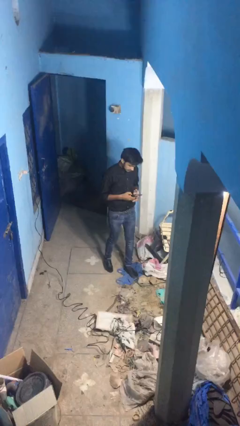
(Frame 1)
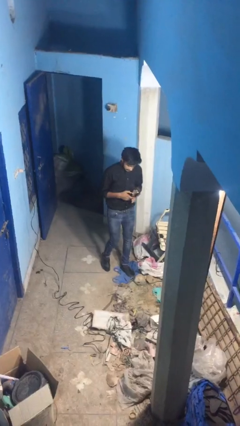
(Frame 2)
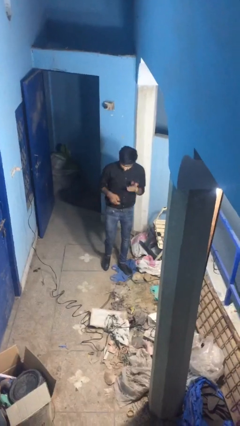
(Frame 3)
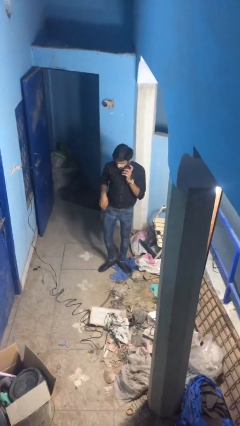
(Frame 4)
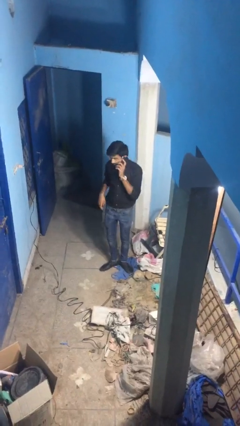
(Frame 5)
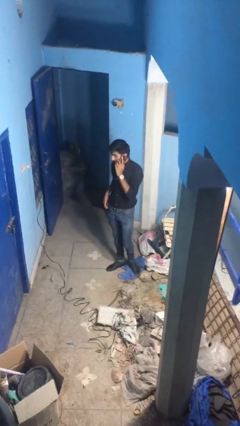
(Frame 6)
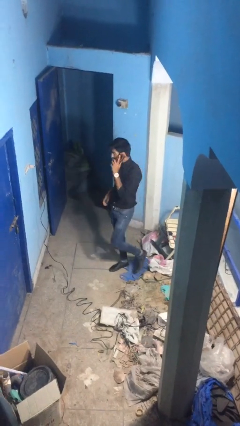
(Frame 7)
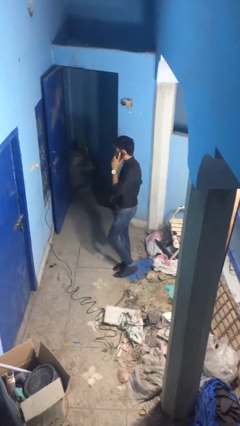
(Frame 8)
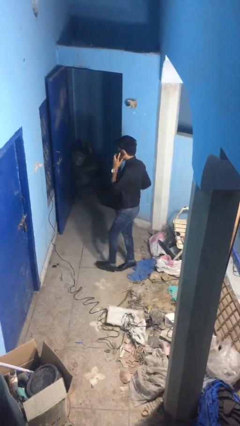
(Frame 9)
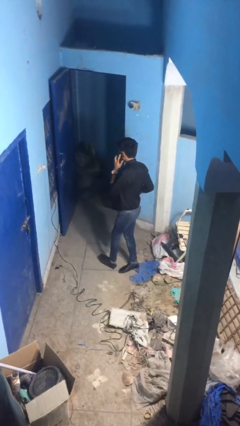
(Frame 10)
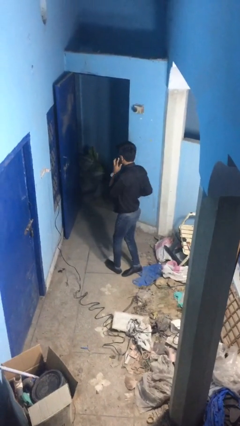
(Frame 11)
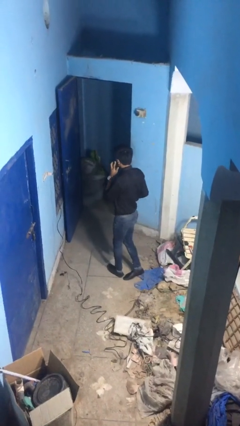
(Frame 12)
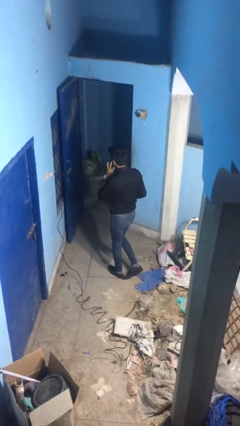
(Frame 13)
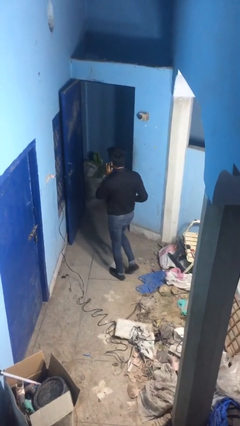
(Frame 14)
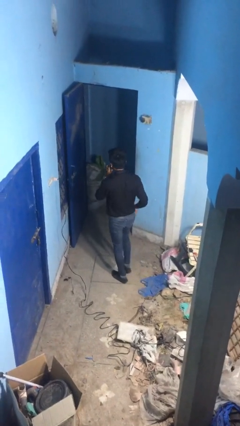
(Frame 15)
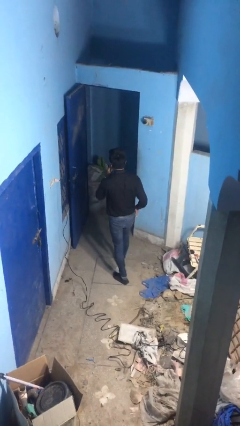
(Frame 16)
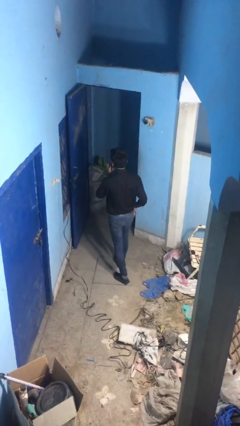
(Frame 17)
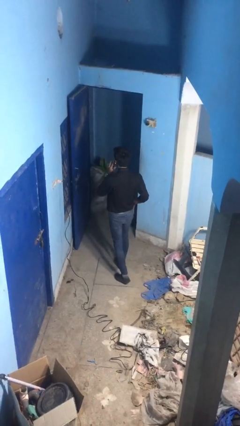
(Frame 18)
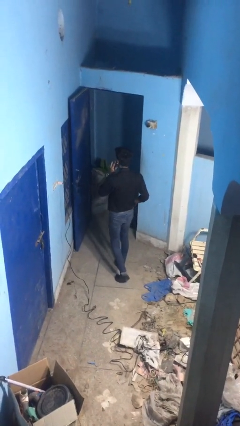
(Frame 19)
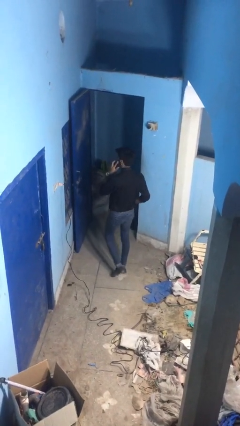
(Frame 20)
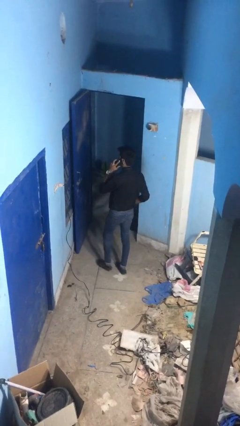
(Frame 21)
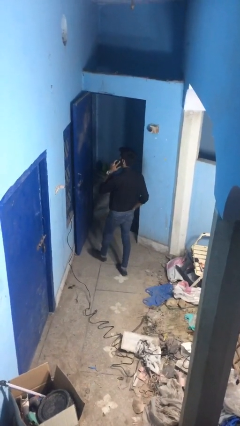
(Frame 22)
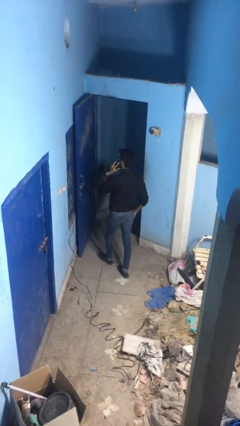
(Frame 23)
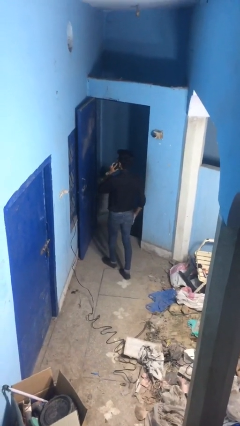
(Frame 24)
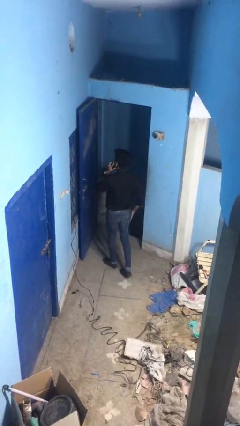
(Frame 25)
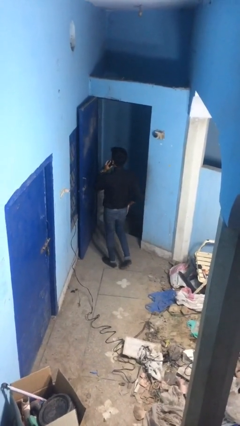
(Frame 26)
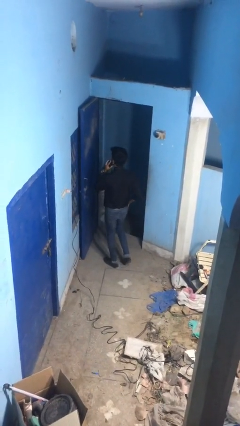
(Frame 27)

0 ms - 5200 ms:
person talks on phone

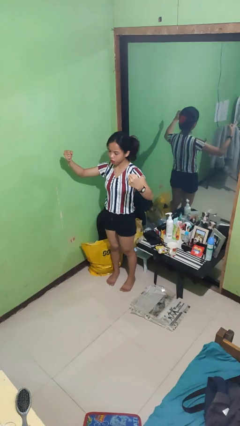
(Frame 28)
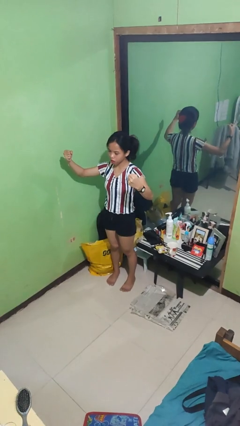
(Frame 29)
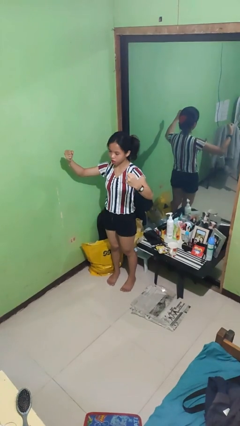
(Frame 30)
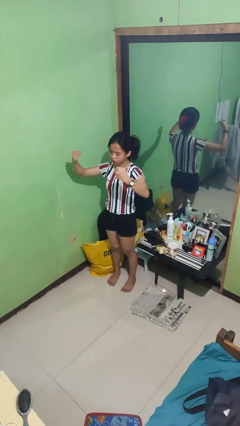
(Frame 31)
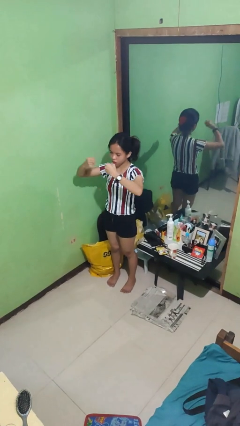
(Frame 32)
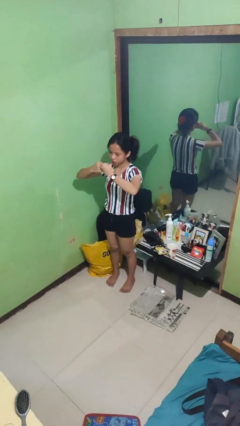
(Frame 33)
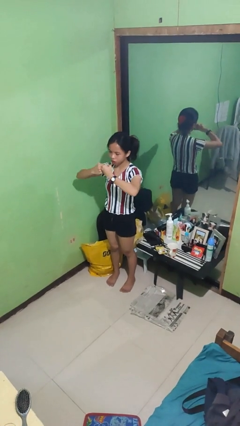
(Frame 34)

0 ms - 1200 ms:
person gestures zoom out

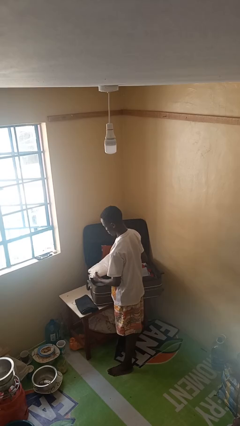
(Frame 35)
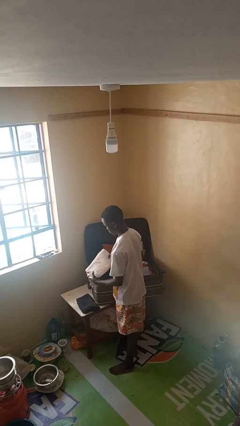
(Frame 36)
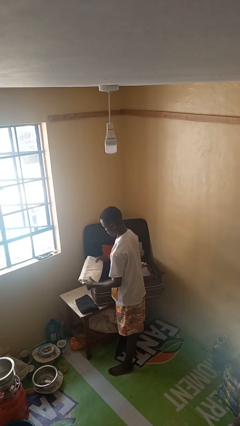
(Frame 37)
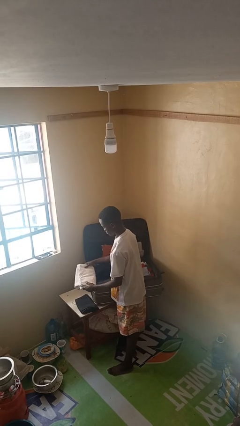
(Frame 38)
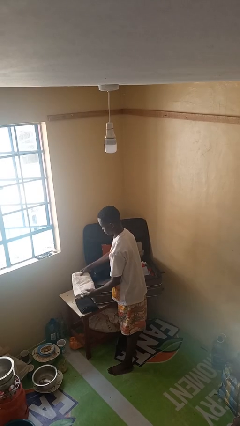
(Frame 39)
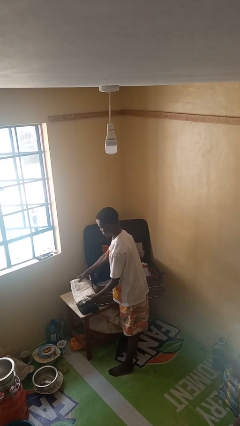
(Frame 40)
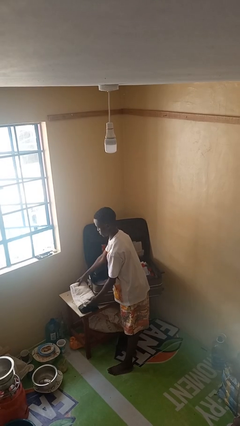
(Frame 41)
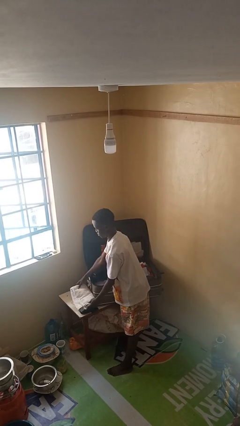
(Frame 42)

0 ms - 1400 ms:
person unloads clothes from suitcase

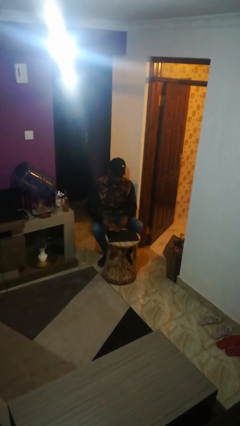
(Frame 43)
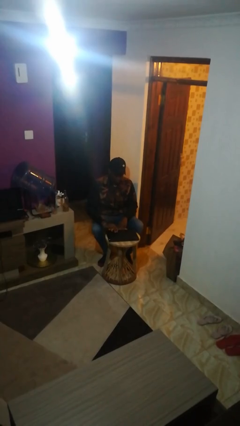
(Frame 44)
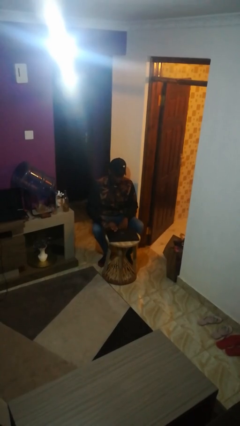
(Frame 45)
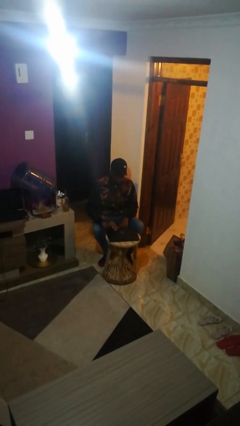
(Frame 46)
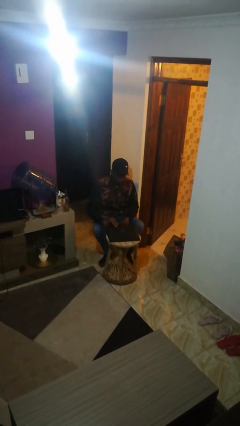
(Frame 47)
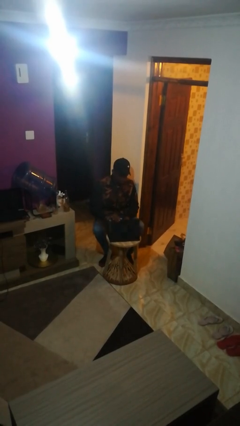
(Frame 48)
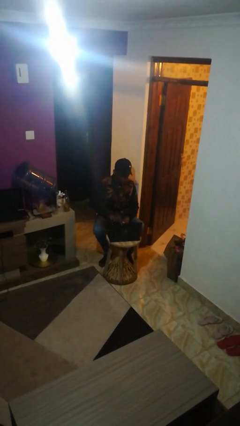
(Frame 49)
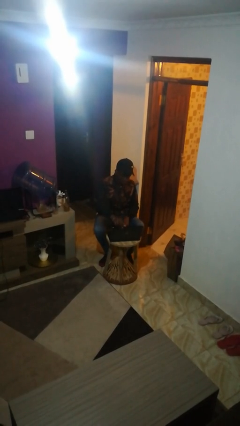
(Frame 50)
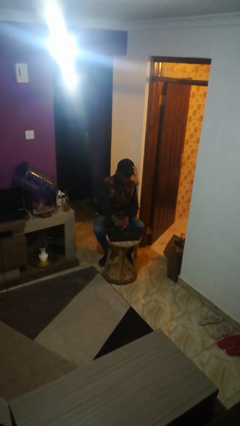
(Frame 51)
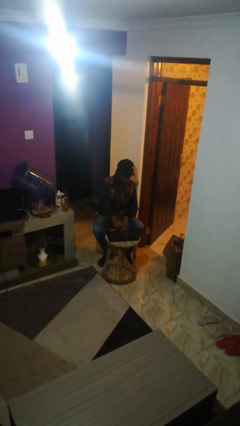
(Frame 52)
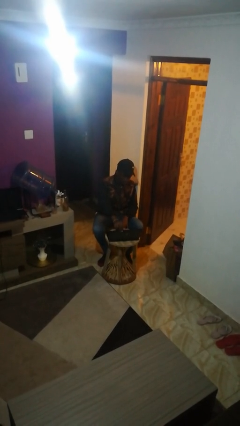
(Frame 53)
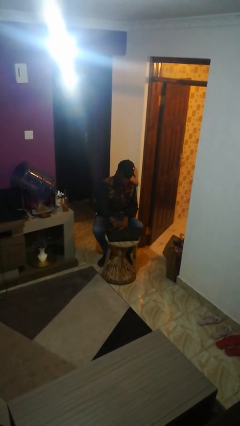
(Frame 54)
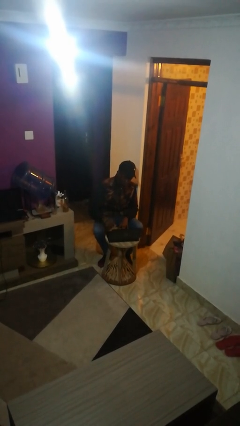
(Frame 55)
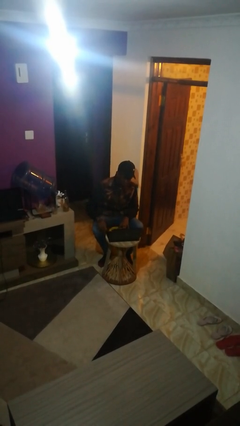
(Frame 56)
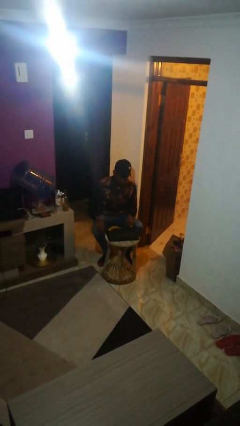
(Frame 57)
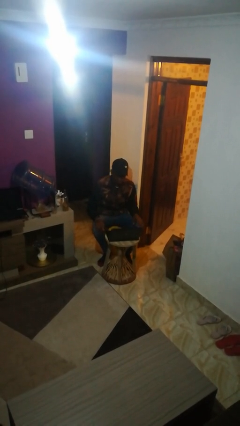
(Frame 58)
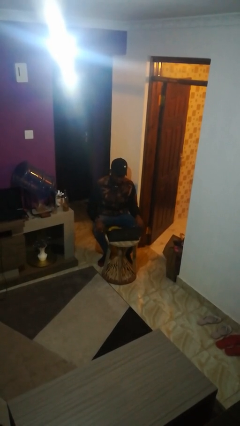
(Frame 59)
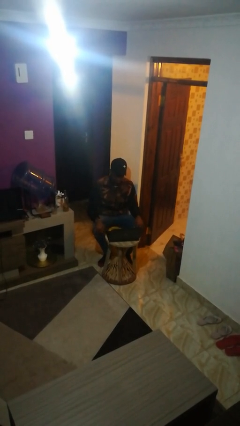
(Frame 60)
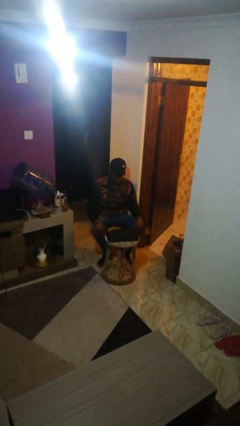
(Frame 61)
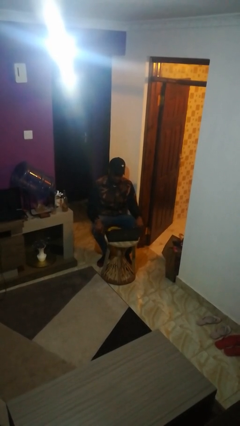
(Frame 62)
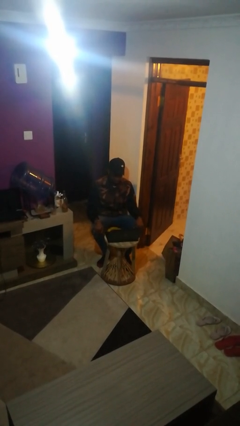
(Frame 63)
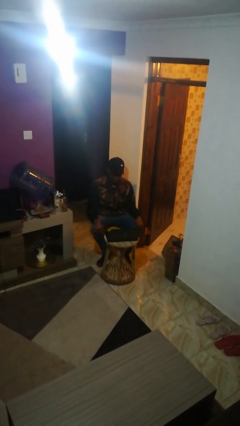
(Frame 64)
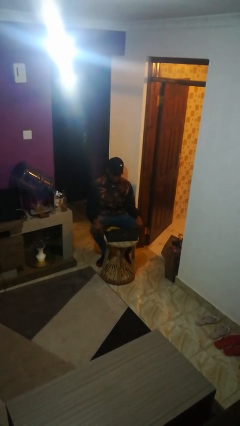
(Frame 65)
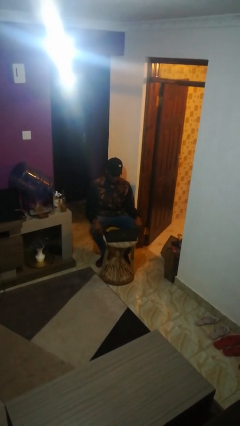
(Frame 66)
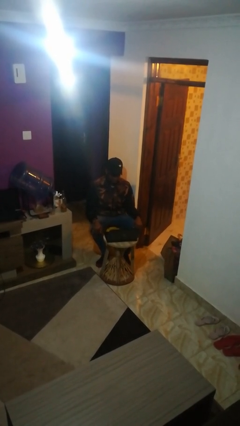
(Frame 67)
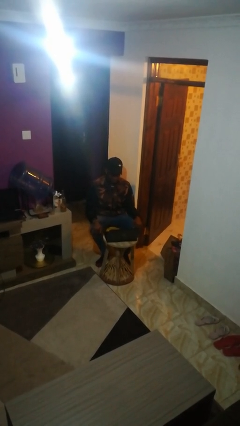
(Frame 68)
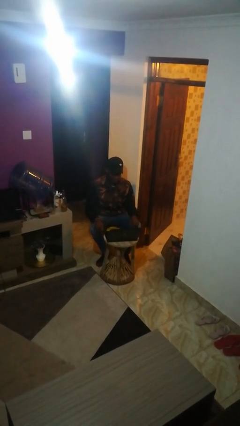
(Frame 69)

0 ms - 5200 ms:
person opens laptop

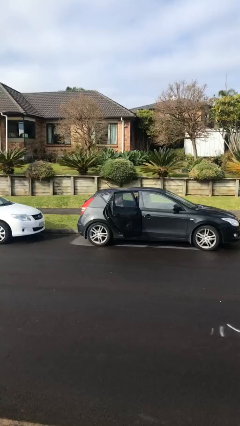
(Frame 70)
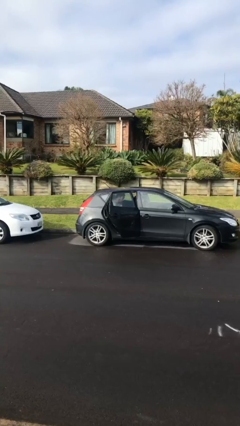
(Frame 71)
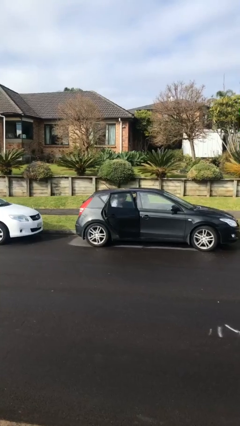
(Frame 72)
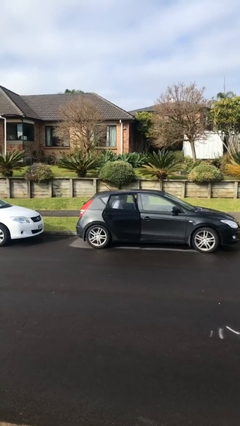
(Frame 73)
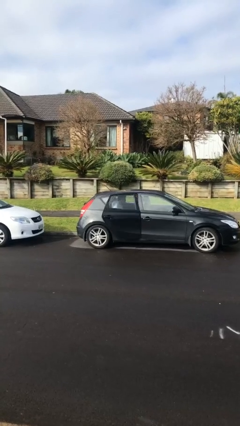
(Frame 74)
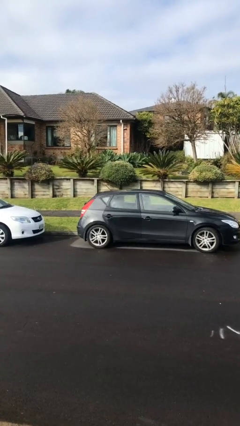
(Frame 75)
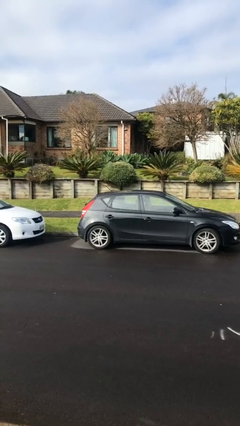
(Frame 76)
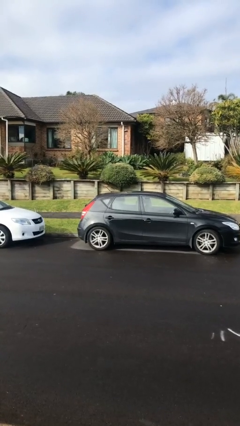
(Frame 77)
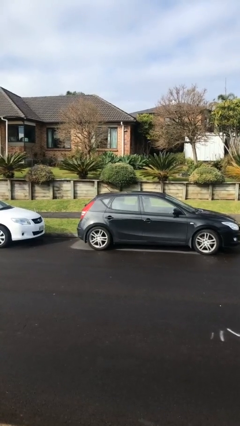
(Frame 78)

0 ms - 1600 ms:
person closes car door

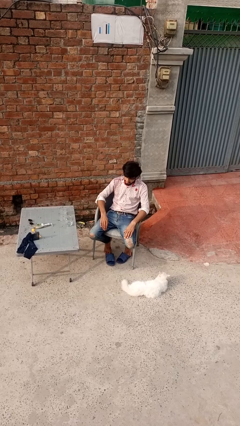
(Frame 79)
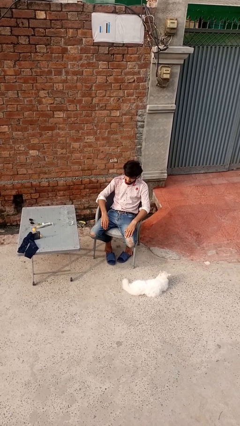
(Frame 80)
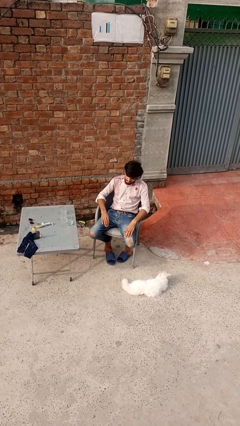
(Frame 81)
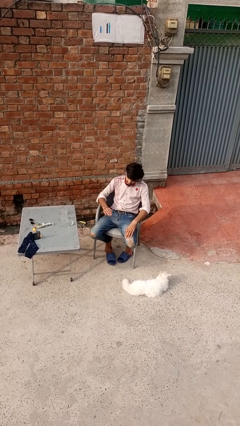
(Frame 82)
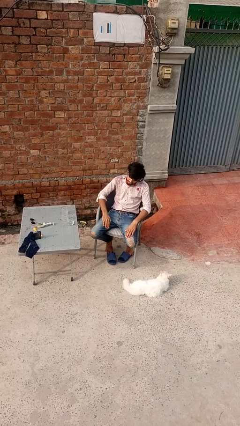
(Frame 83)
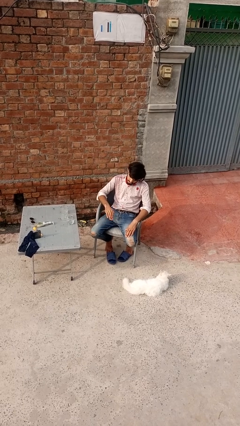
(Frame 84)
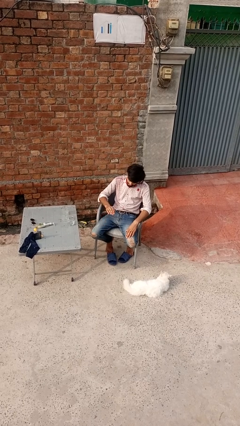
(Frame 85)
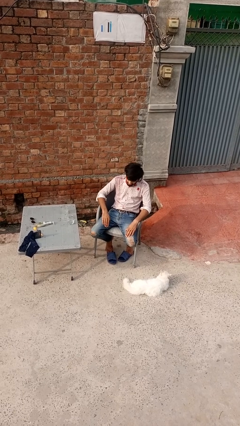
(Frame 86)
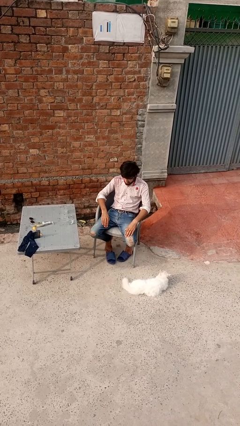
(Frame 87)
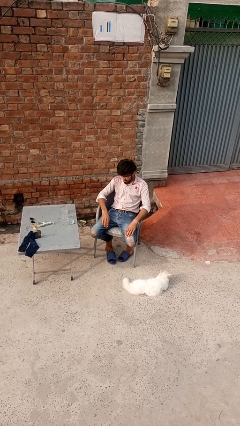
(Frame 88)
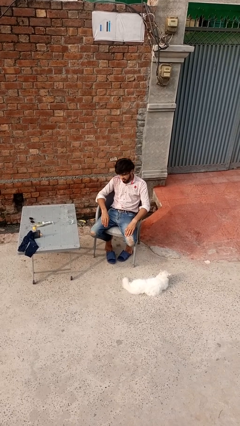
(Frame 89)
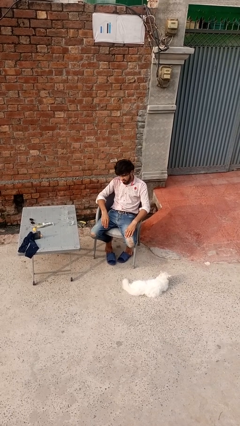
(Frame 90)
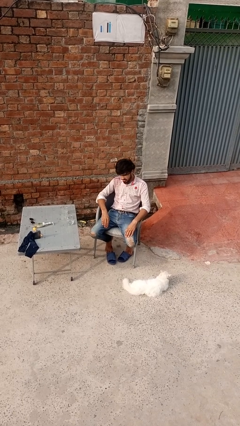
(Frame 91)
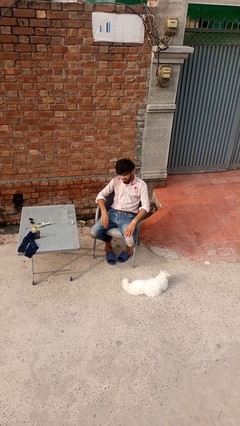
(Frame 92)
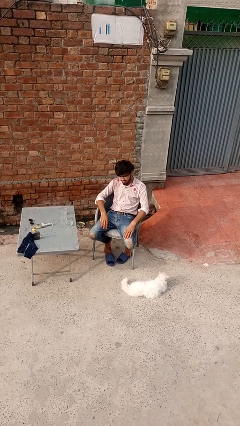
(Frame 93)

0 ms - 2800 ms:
person slaps hands on thighs

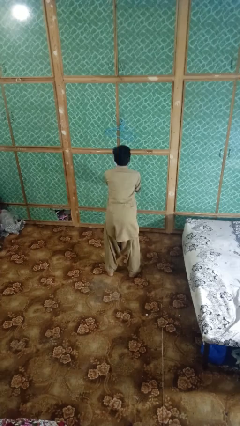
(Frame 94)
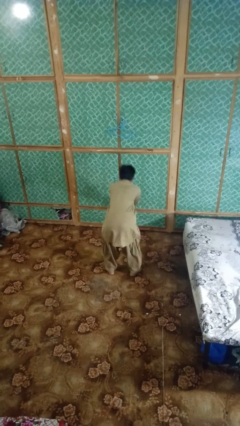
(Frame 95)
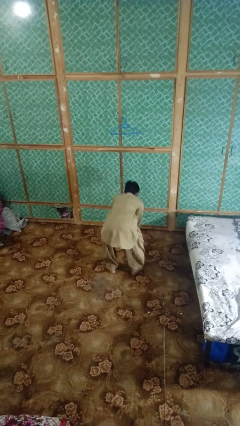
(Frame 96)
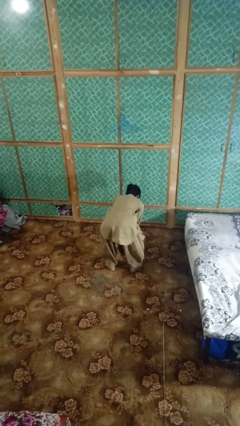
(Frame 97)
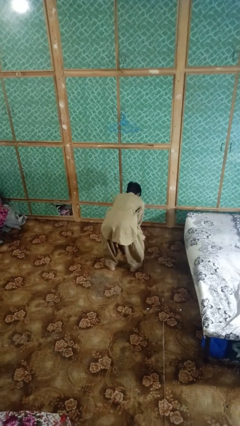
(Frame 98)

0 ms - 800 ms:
person catches dropped object
